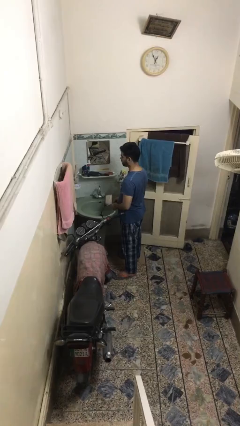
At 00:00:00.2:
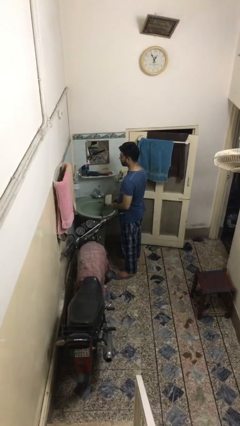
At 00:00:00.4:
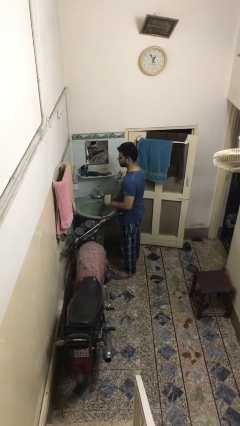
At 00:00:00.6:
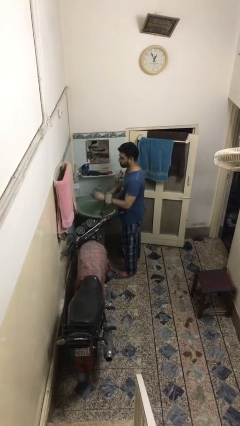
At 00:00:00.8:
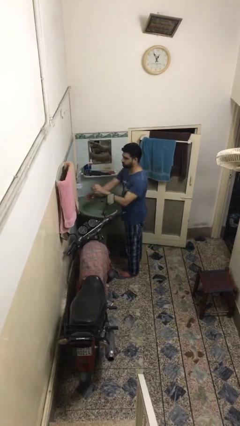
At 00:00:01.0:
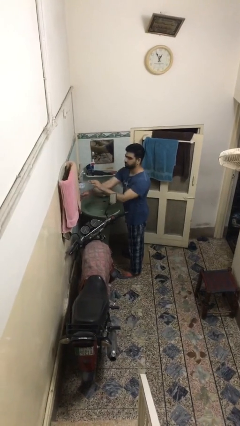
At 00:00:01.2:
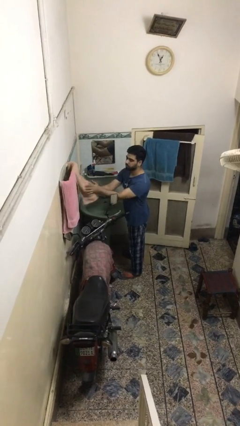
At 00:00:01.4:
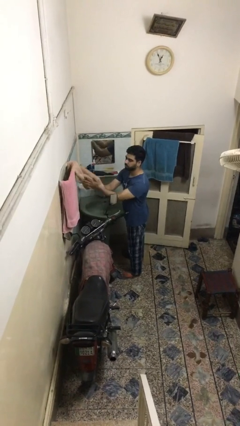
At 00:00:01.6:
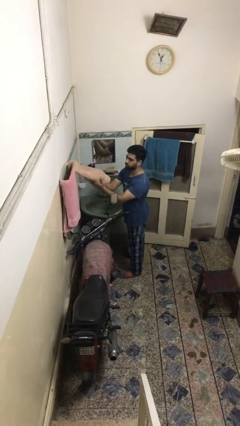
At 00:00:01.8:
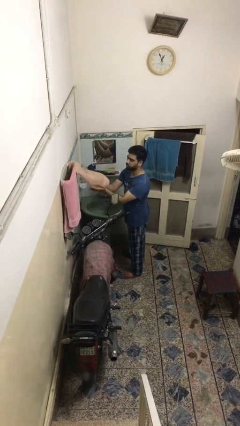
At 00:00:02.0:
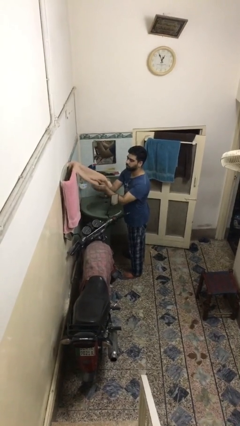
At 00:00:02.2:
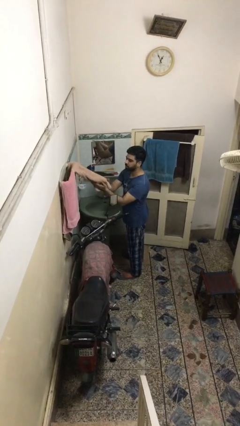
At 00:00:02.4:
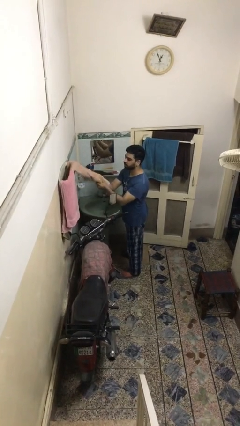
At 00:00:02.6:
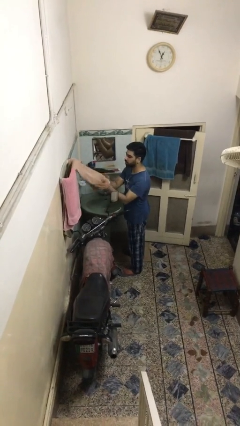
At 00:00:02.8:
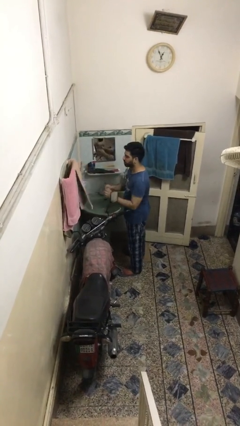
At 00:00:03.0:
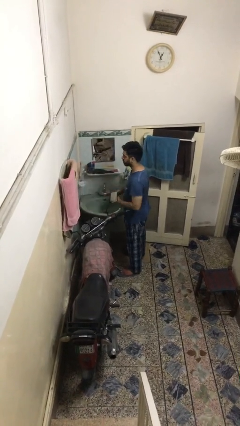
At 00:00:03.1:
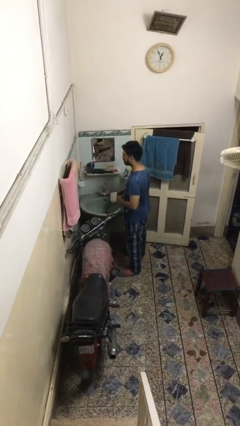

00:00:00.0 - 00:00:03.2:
person dries hands with towel

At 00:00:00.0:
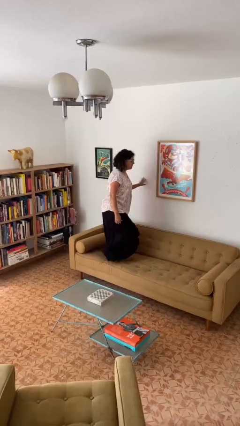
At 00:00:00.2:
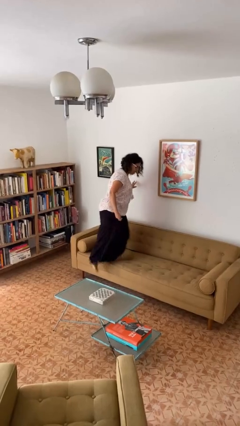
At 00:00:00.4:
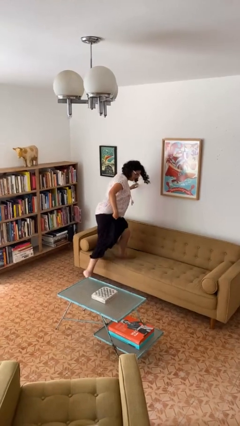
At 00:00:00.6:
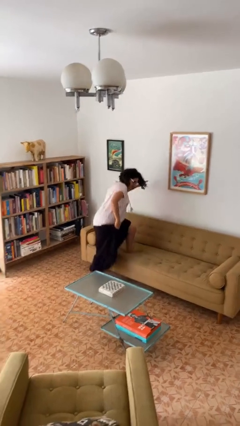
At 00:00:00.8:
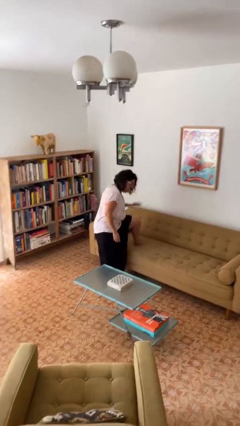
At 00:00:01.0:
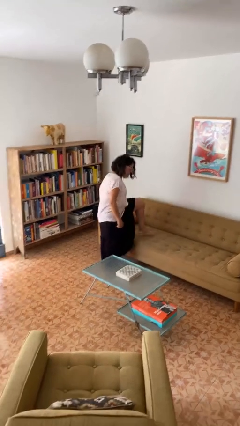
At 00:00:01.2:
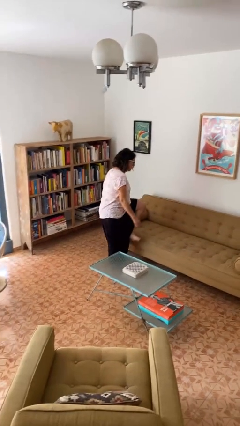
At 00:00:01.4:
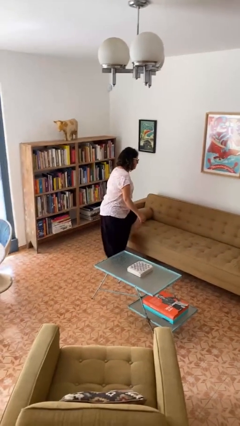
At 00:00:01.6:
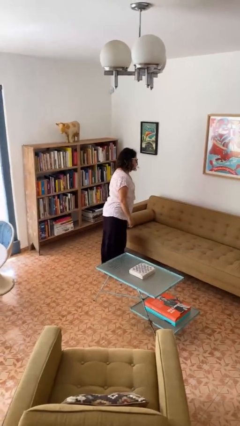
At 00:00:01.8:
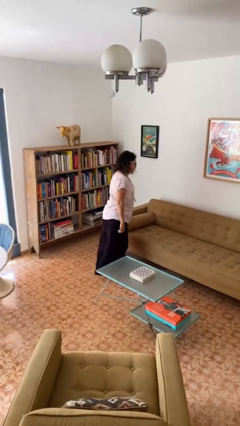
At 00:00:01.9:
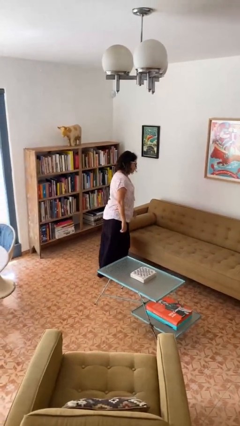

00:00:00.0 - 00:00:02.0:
person climbs off couch

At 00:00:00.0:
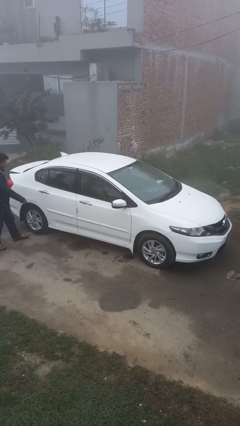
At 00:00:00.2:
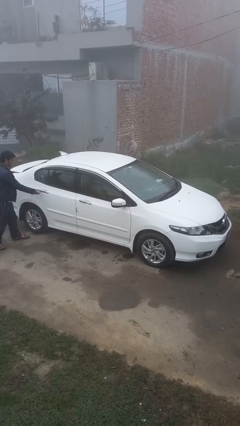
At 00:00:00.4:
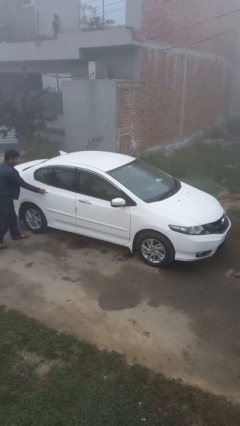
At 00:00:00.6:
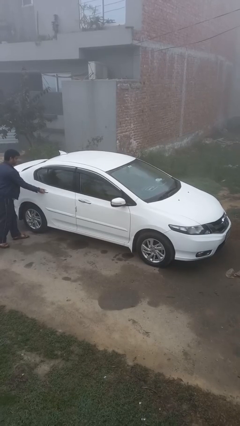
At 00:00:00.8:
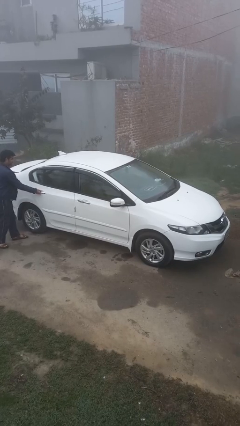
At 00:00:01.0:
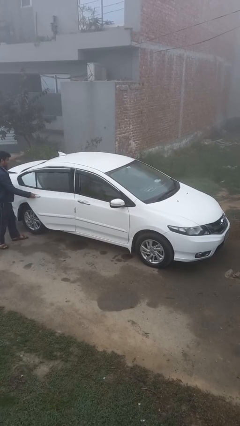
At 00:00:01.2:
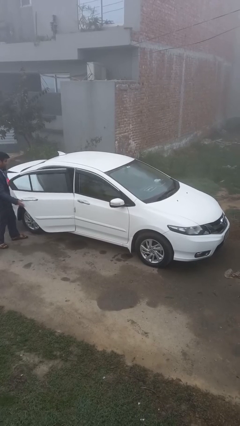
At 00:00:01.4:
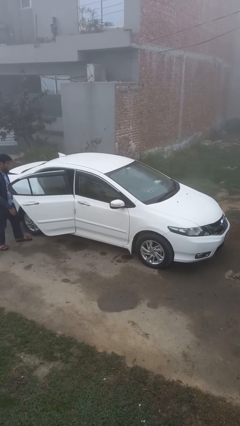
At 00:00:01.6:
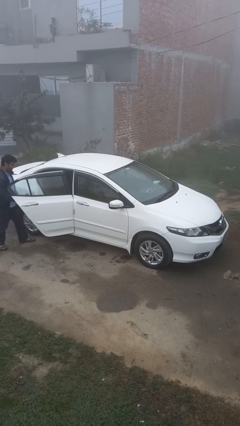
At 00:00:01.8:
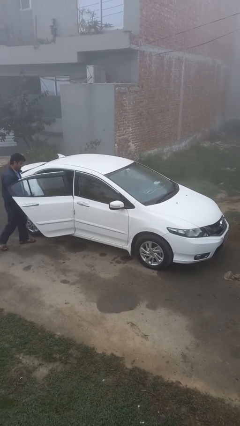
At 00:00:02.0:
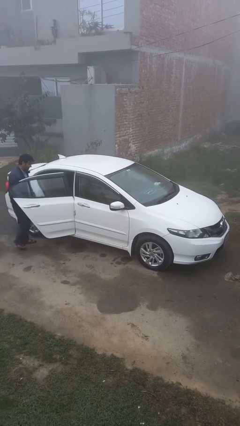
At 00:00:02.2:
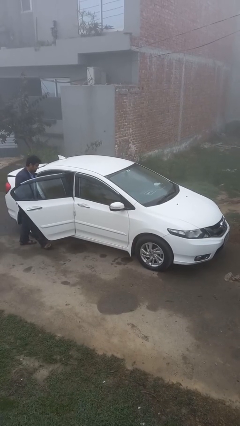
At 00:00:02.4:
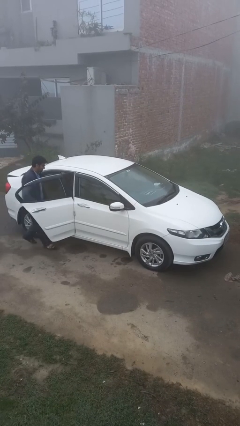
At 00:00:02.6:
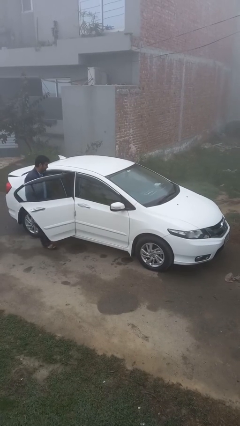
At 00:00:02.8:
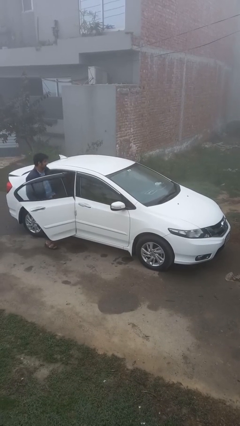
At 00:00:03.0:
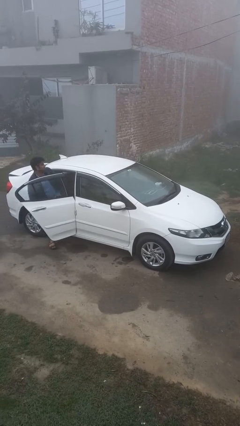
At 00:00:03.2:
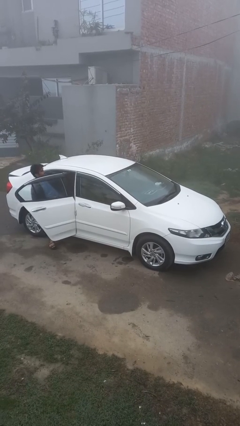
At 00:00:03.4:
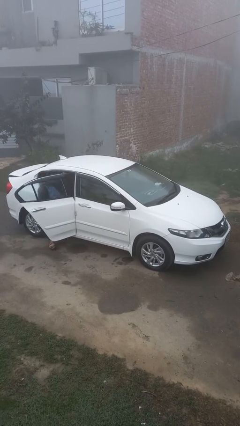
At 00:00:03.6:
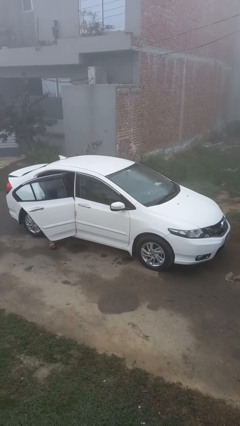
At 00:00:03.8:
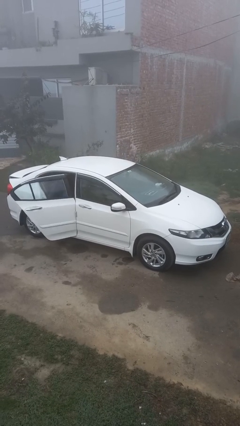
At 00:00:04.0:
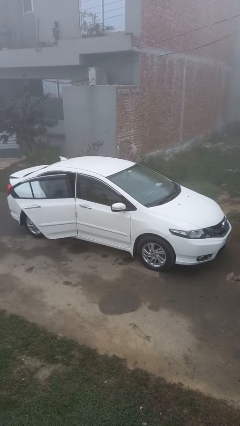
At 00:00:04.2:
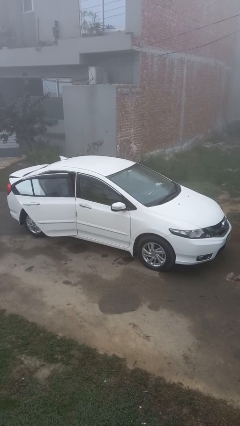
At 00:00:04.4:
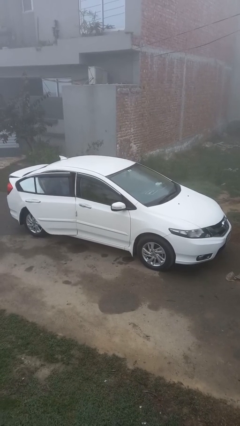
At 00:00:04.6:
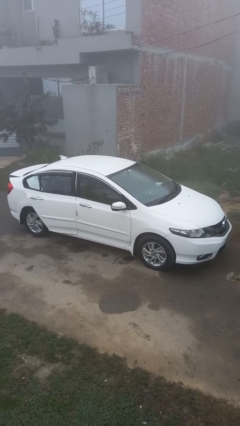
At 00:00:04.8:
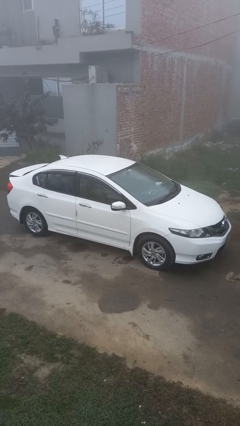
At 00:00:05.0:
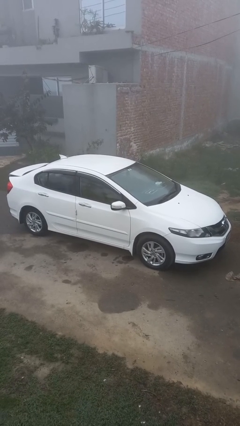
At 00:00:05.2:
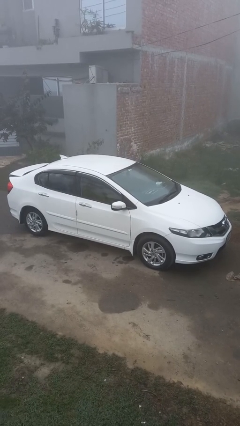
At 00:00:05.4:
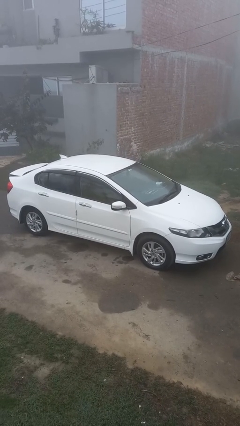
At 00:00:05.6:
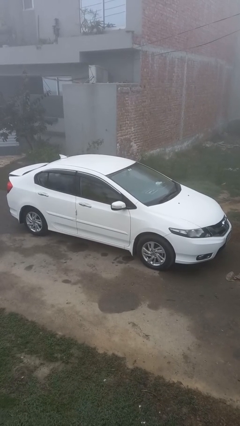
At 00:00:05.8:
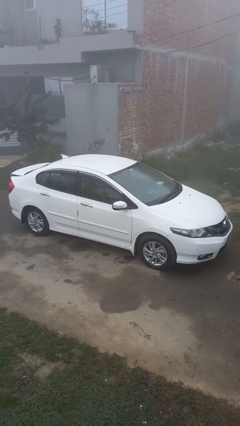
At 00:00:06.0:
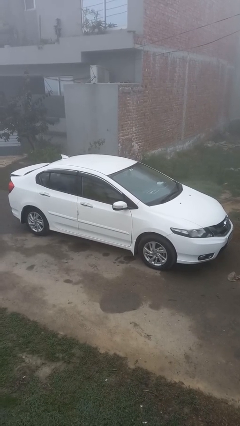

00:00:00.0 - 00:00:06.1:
car picks up person

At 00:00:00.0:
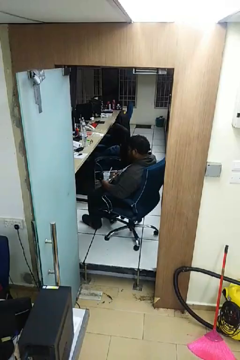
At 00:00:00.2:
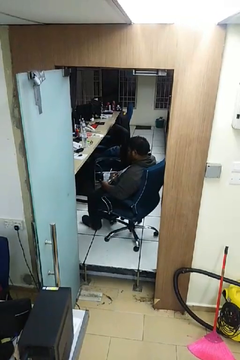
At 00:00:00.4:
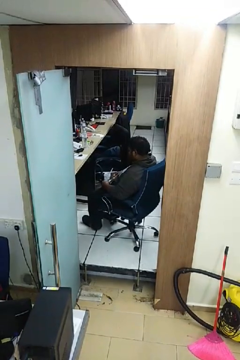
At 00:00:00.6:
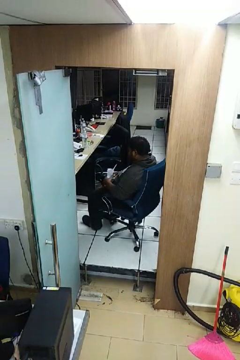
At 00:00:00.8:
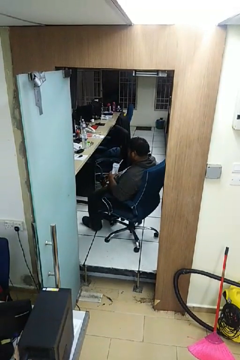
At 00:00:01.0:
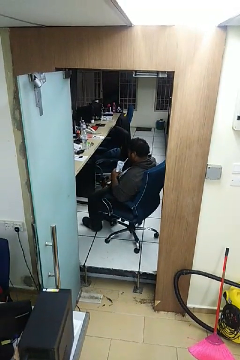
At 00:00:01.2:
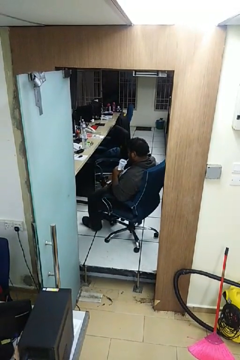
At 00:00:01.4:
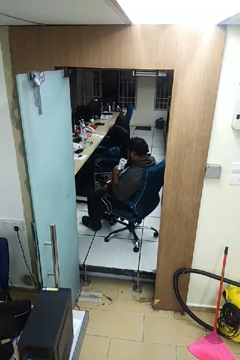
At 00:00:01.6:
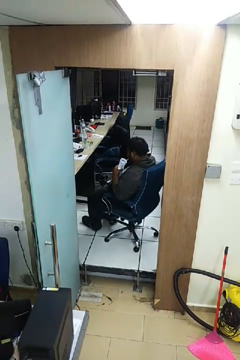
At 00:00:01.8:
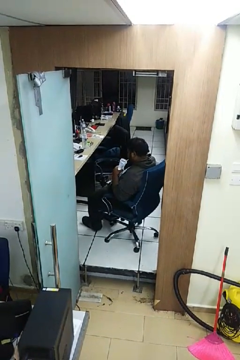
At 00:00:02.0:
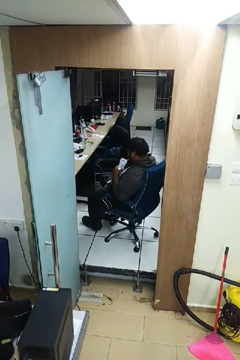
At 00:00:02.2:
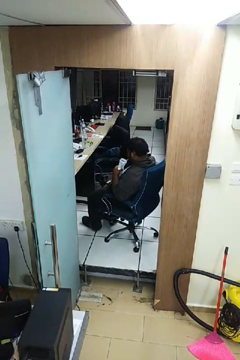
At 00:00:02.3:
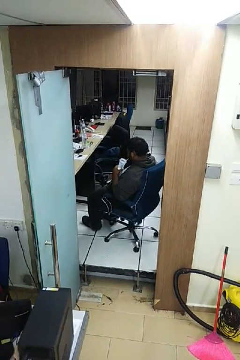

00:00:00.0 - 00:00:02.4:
person drinks from straw

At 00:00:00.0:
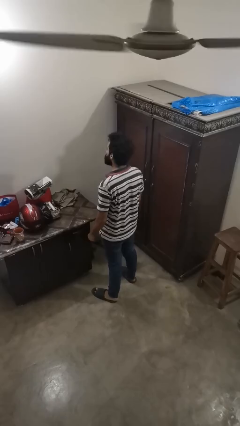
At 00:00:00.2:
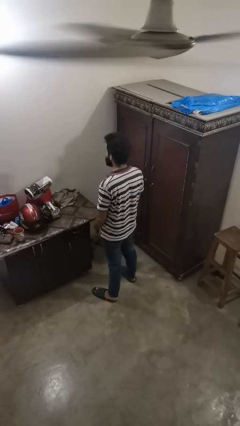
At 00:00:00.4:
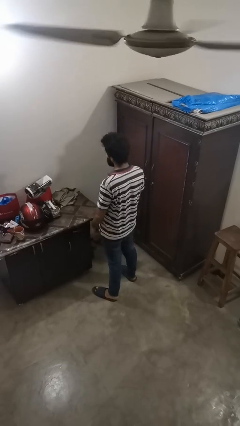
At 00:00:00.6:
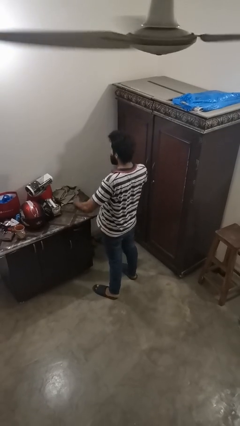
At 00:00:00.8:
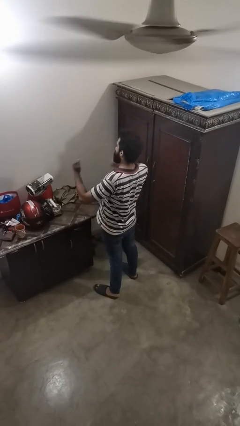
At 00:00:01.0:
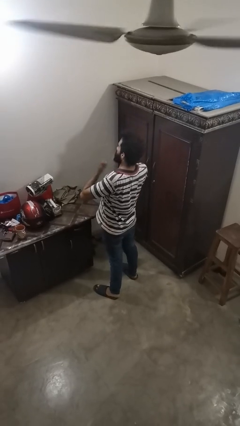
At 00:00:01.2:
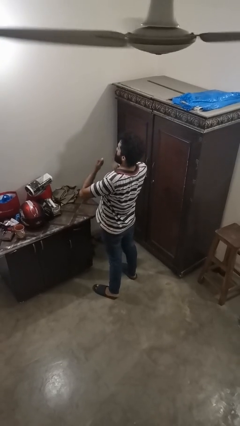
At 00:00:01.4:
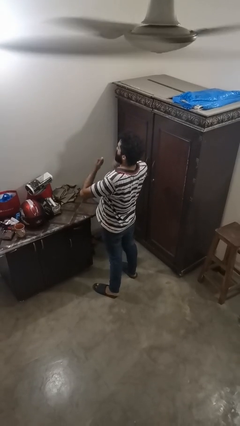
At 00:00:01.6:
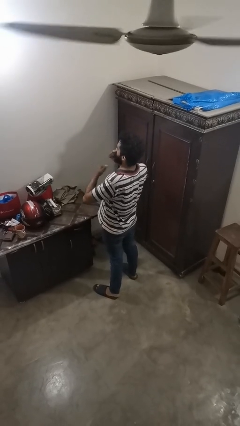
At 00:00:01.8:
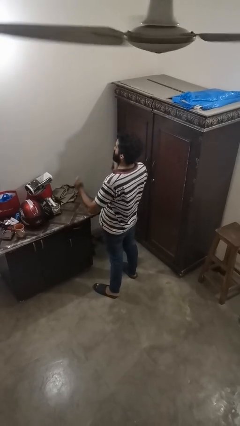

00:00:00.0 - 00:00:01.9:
person drums on chest

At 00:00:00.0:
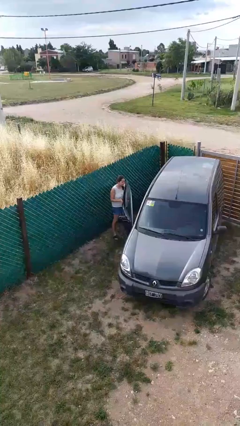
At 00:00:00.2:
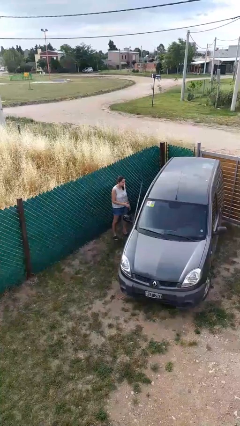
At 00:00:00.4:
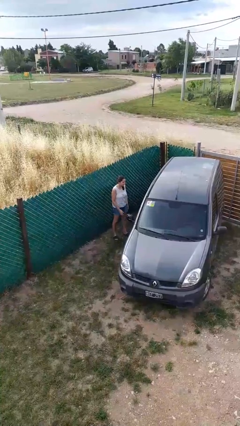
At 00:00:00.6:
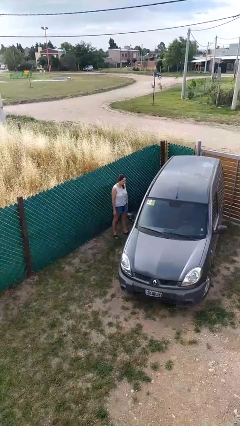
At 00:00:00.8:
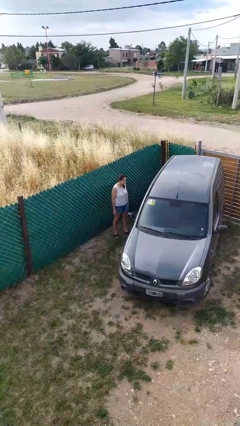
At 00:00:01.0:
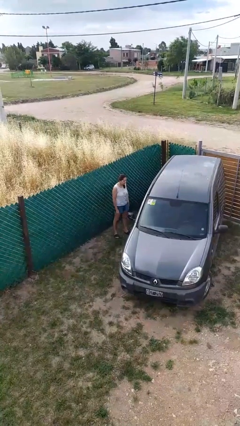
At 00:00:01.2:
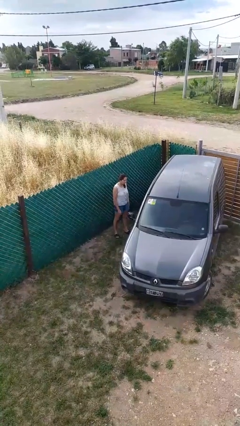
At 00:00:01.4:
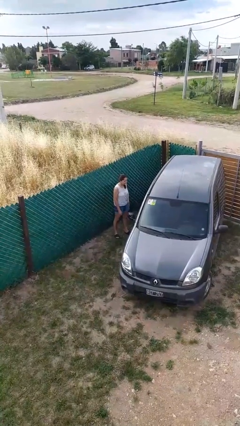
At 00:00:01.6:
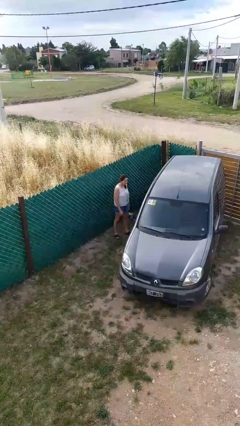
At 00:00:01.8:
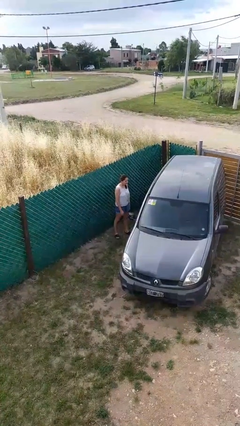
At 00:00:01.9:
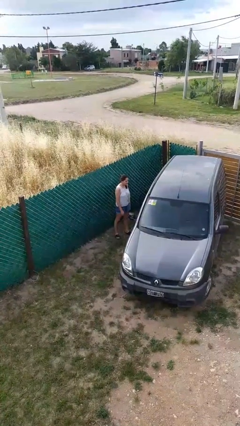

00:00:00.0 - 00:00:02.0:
person closes car door
